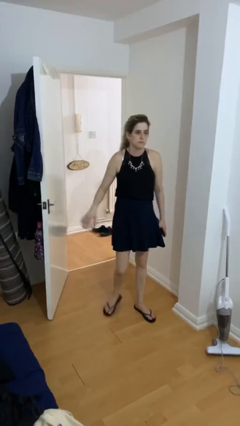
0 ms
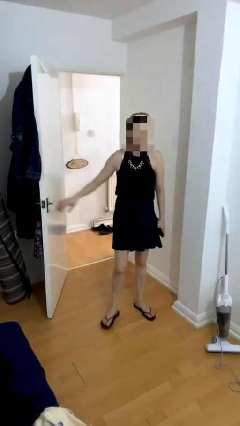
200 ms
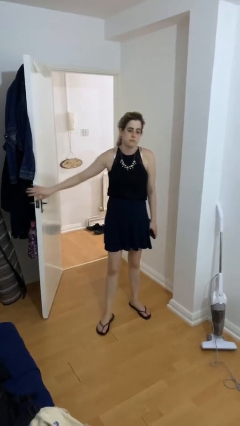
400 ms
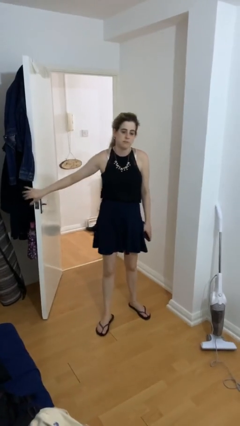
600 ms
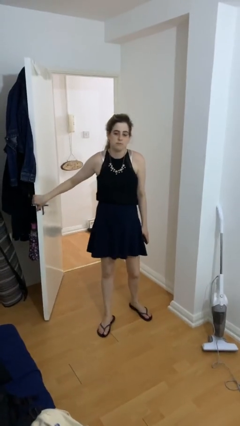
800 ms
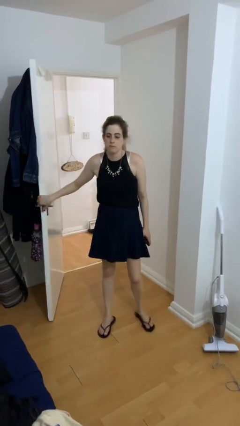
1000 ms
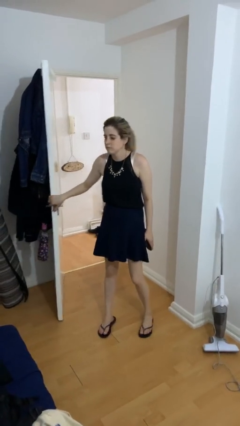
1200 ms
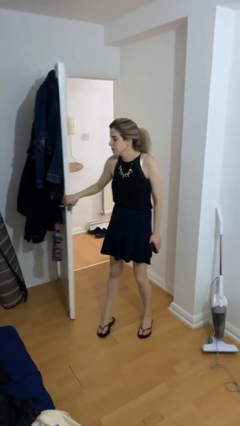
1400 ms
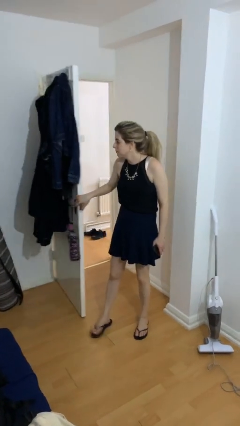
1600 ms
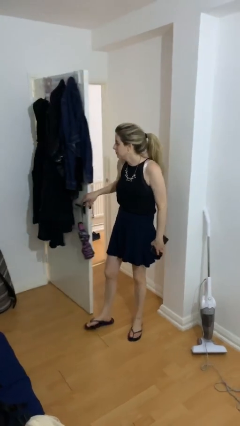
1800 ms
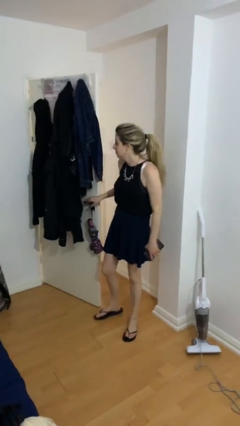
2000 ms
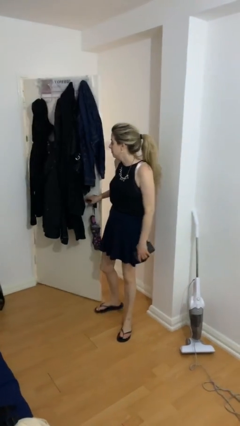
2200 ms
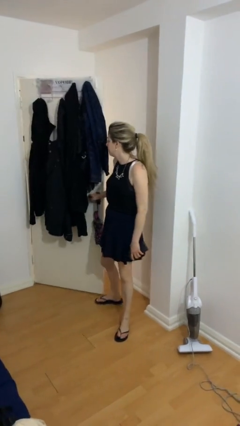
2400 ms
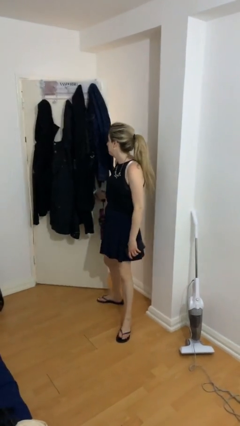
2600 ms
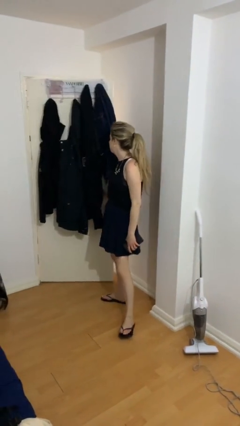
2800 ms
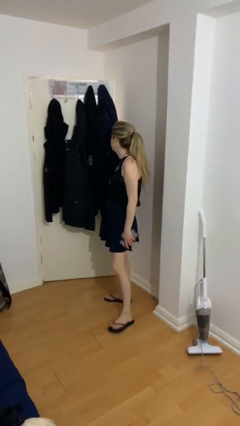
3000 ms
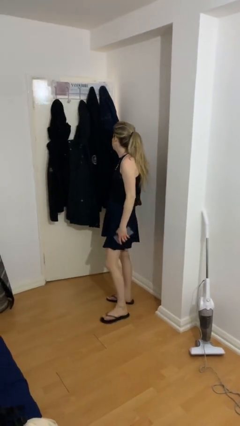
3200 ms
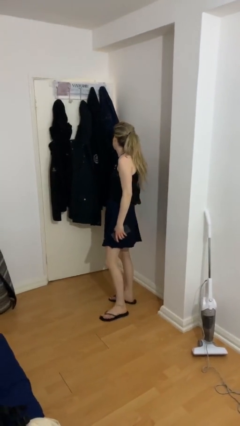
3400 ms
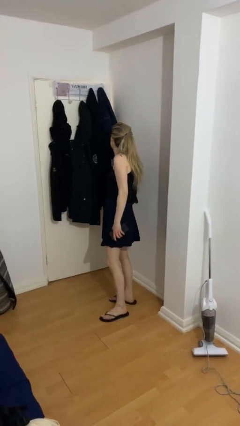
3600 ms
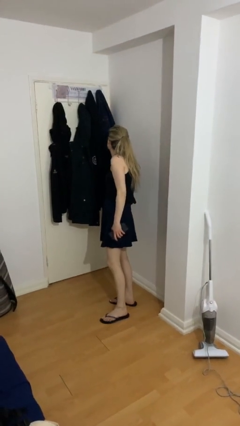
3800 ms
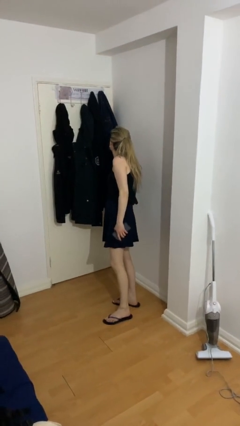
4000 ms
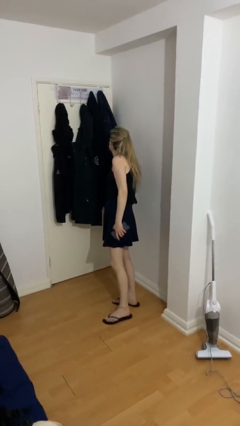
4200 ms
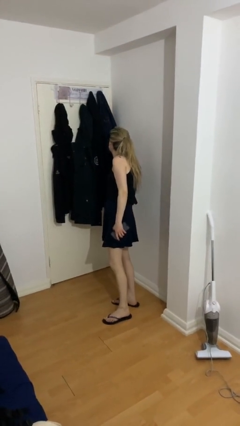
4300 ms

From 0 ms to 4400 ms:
person closes facility door

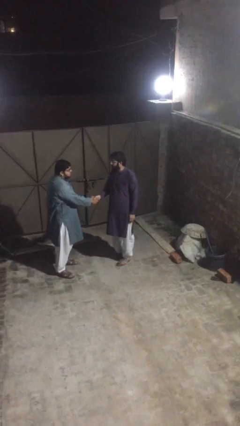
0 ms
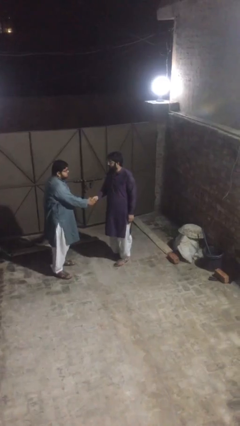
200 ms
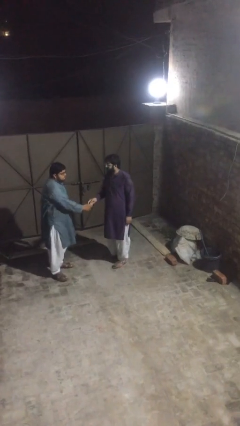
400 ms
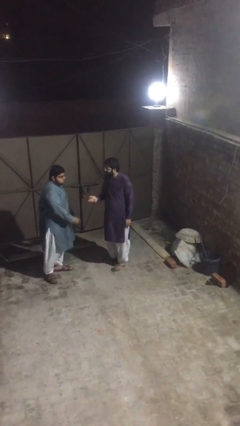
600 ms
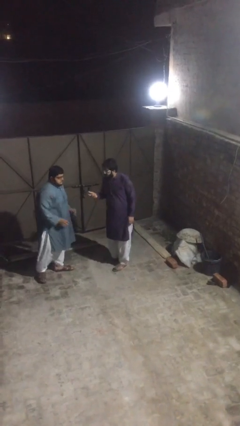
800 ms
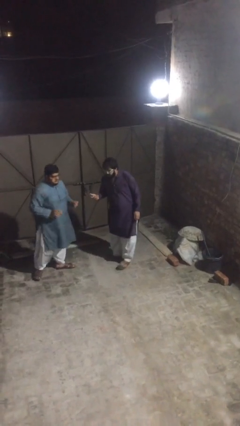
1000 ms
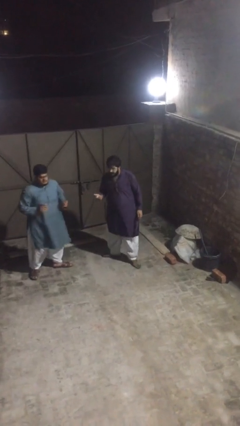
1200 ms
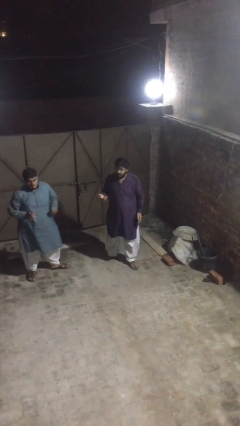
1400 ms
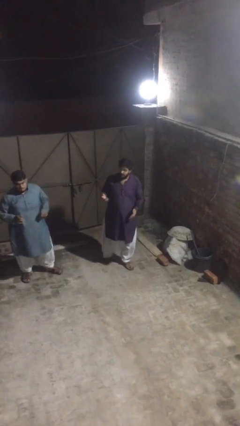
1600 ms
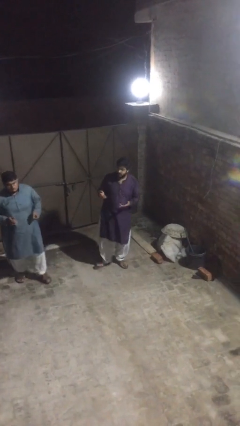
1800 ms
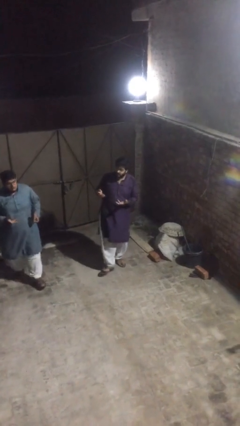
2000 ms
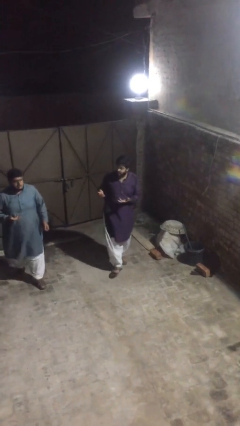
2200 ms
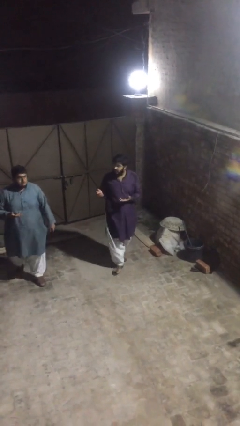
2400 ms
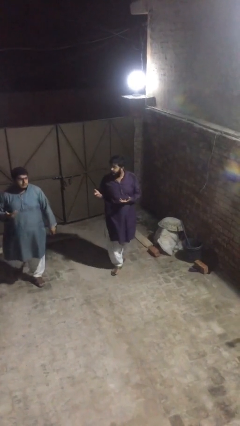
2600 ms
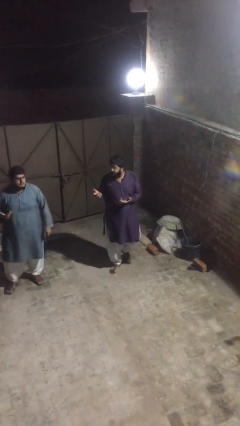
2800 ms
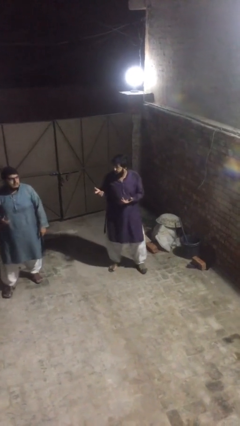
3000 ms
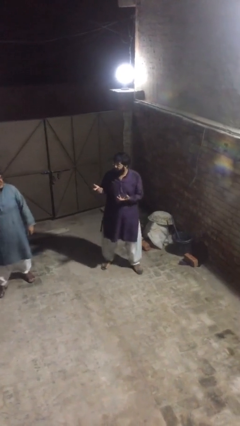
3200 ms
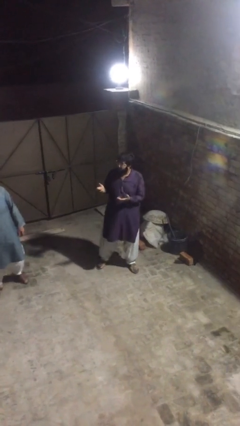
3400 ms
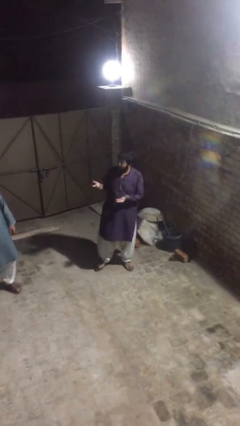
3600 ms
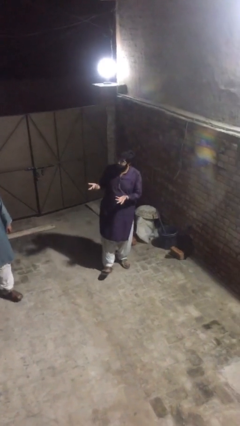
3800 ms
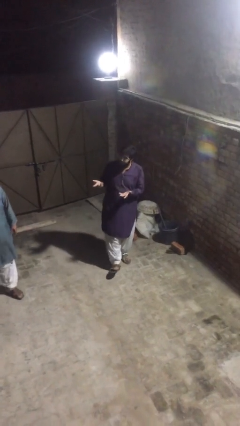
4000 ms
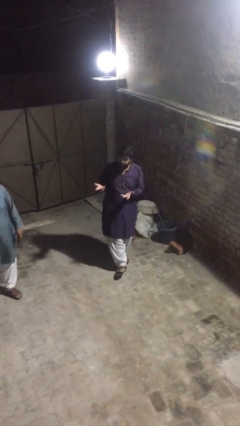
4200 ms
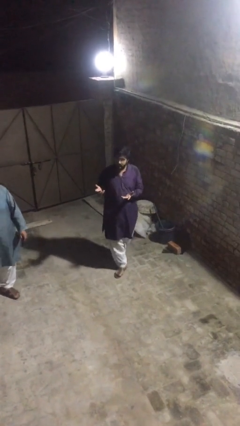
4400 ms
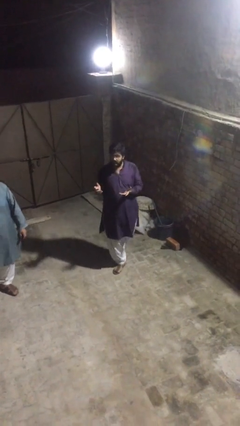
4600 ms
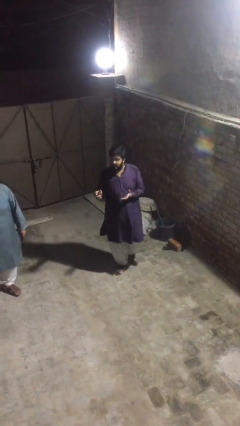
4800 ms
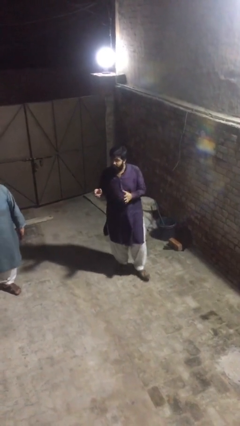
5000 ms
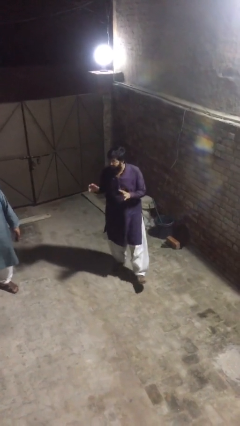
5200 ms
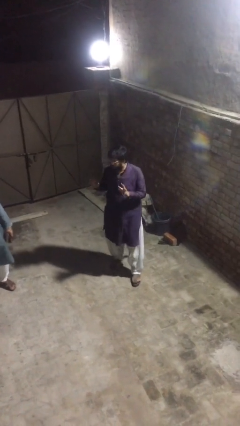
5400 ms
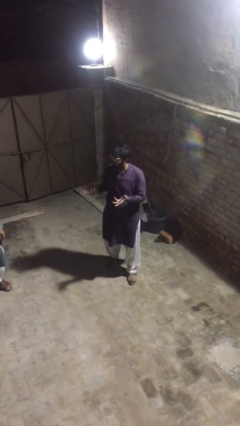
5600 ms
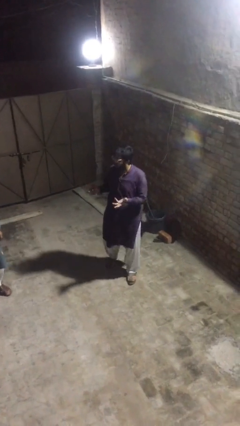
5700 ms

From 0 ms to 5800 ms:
person talks to person

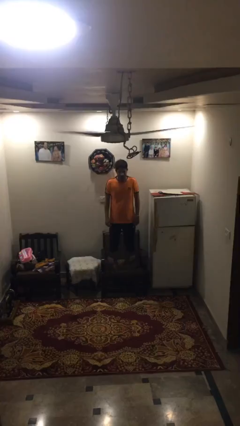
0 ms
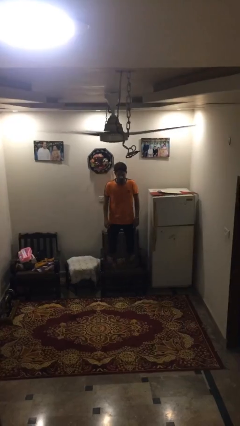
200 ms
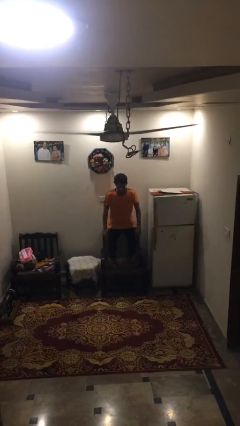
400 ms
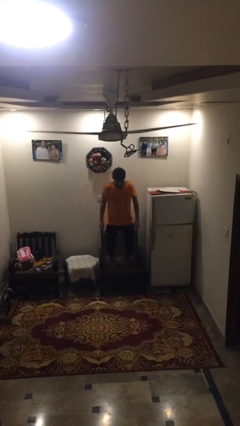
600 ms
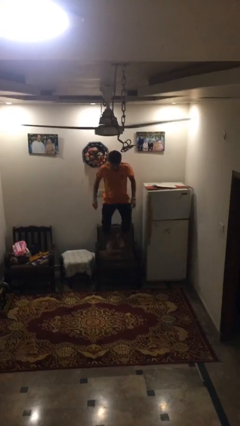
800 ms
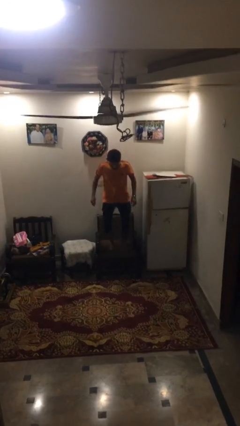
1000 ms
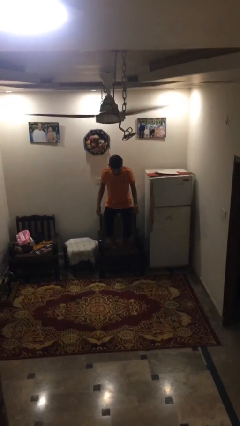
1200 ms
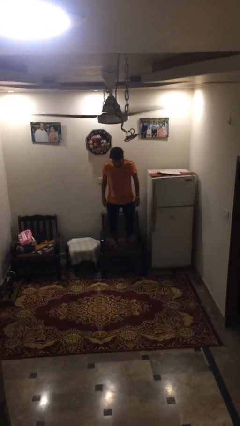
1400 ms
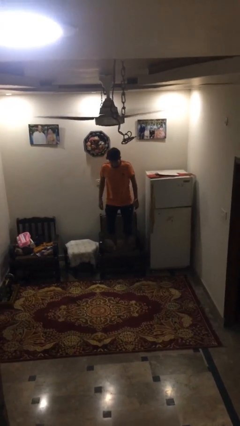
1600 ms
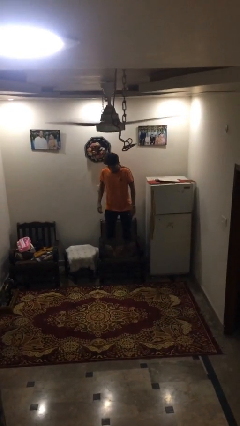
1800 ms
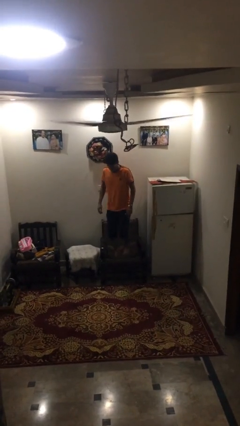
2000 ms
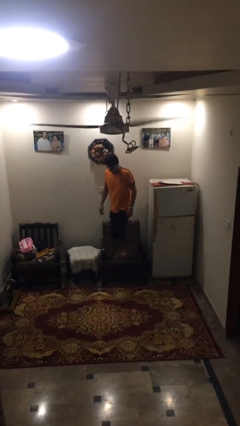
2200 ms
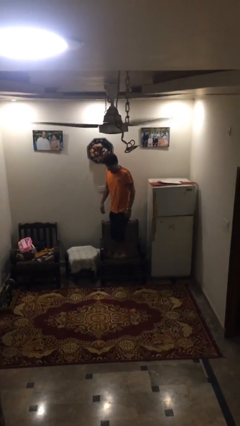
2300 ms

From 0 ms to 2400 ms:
person jumps on couch

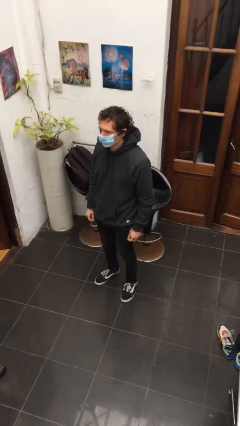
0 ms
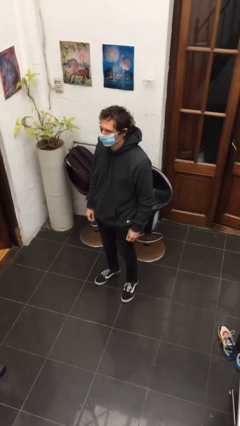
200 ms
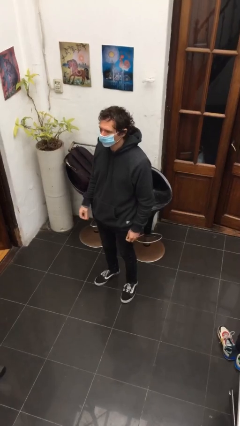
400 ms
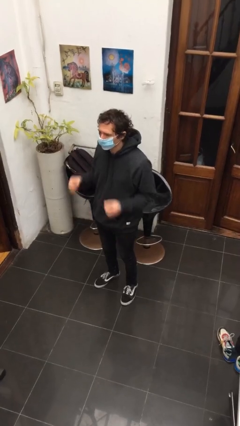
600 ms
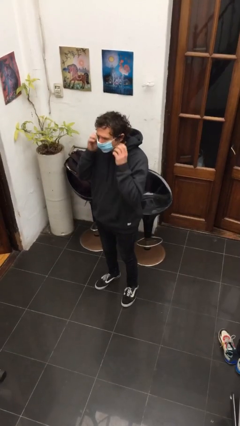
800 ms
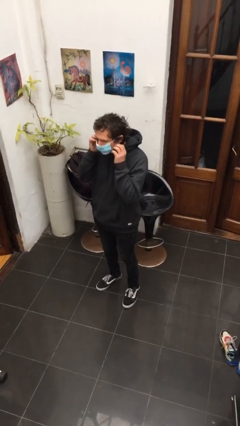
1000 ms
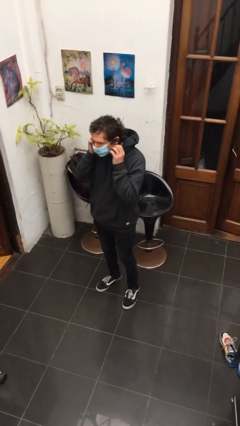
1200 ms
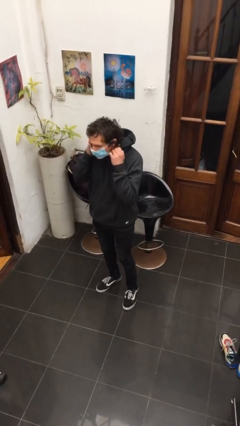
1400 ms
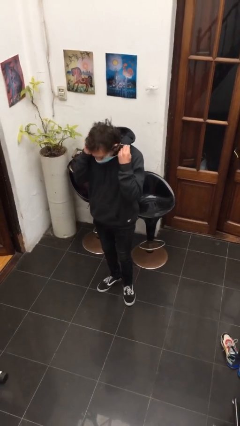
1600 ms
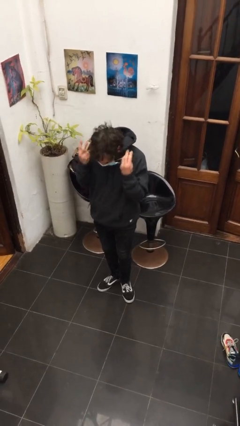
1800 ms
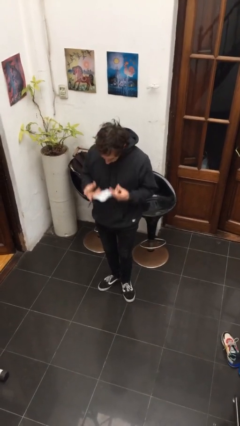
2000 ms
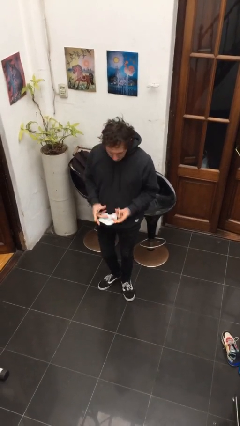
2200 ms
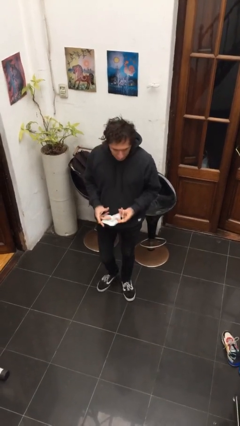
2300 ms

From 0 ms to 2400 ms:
person takes off facemask

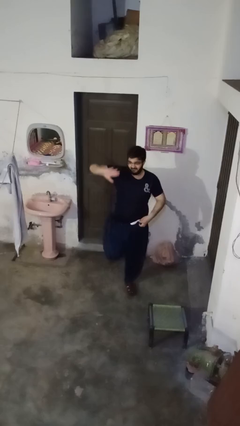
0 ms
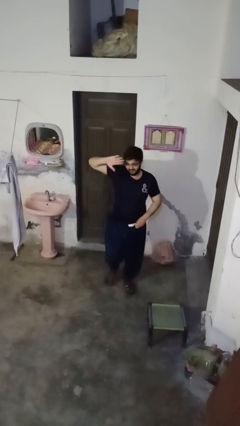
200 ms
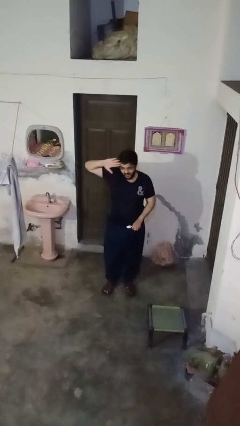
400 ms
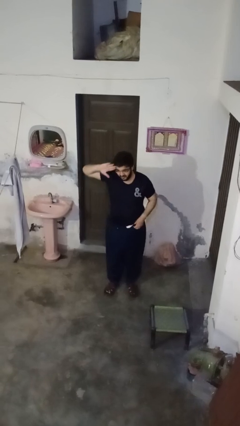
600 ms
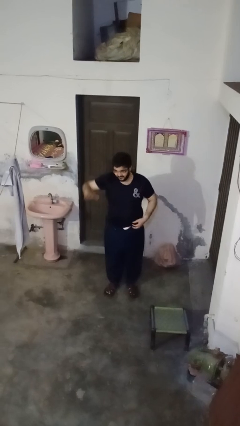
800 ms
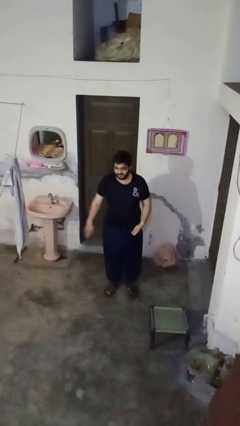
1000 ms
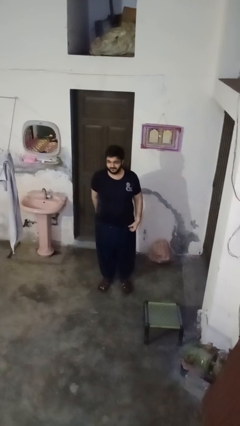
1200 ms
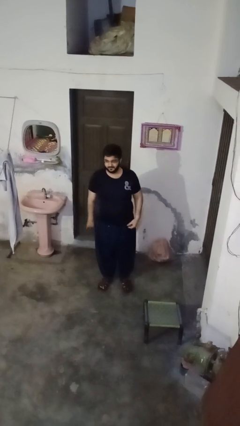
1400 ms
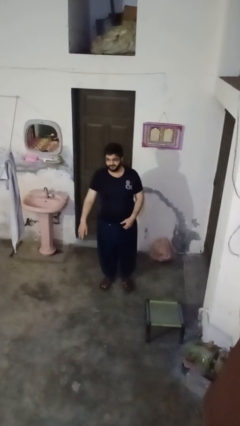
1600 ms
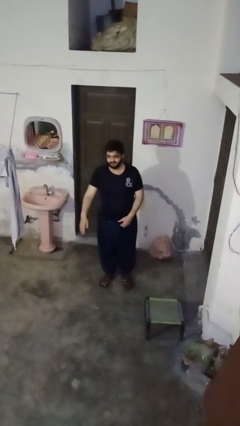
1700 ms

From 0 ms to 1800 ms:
person salutes

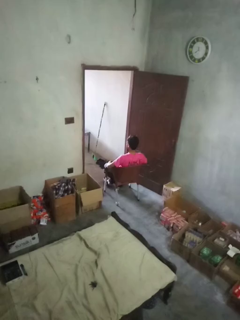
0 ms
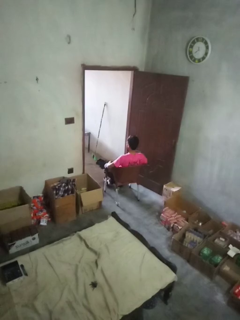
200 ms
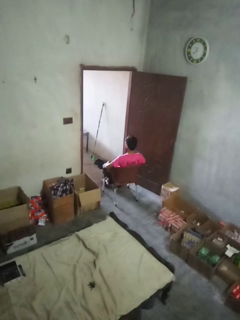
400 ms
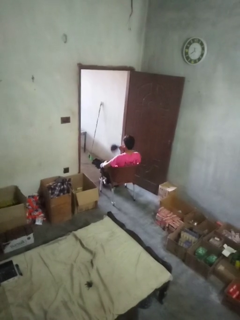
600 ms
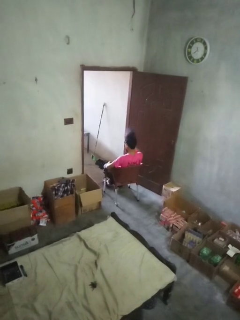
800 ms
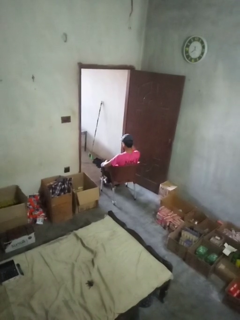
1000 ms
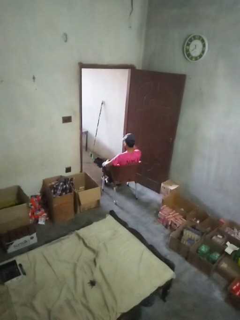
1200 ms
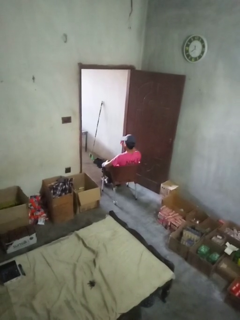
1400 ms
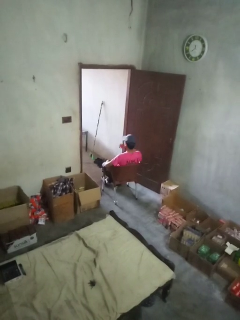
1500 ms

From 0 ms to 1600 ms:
person puts on hat
